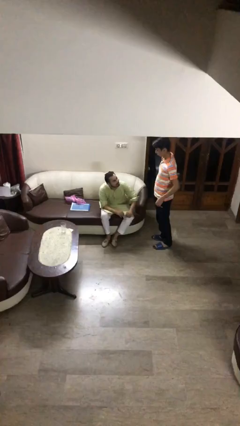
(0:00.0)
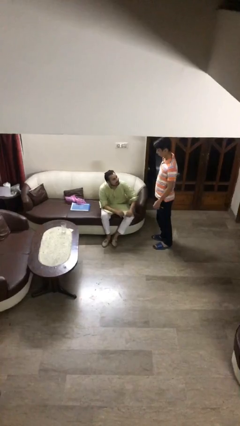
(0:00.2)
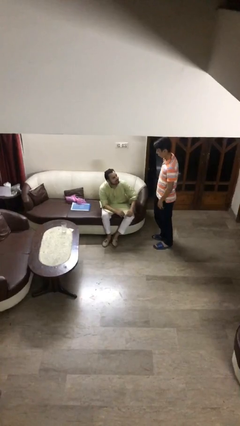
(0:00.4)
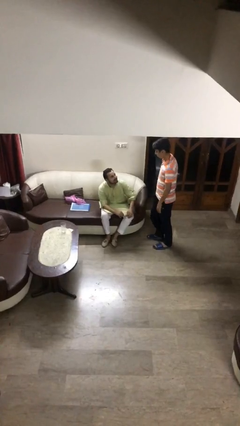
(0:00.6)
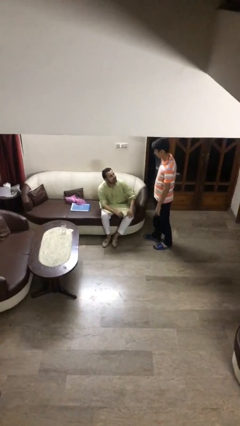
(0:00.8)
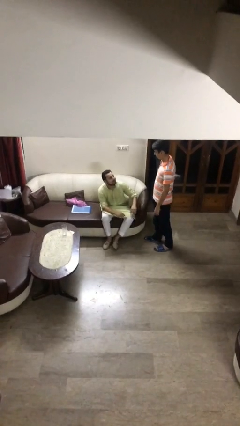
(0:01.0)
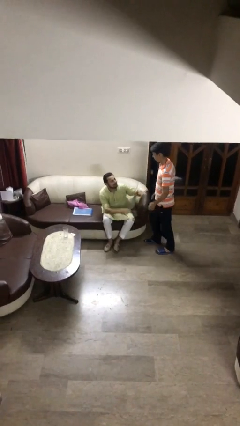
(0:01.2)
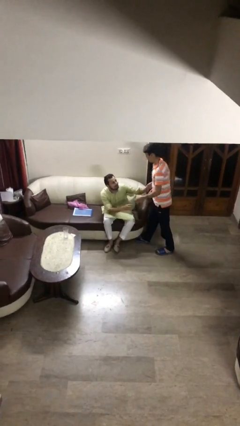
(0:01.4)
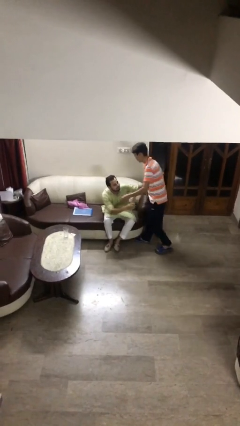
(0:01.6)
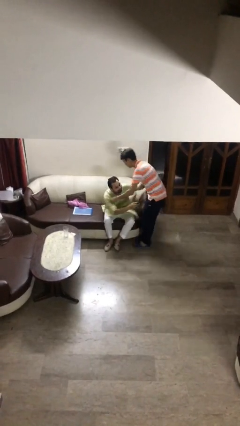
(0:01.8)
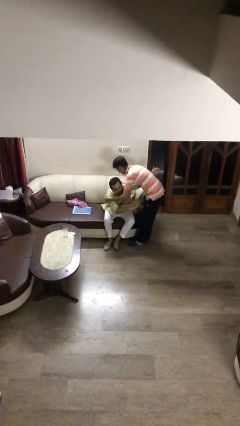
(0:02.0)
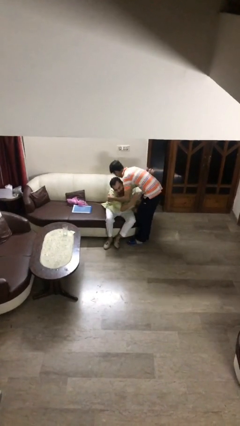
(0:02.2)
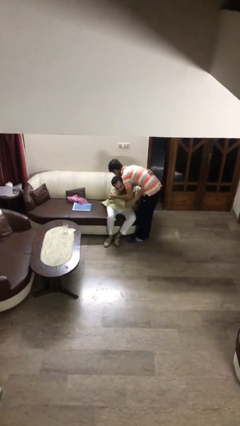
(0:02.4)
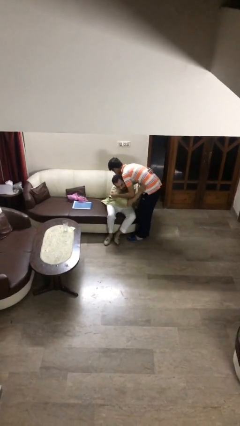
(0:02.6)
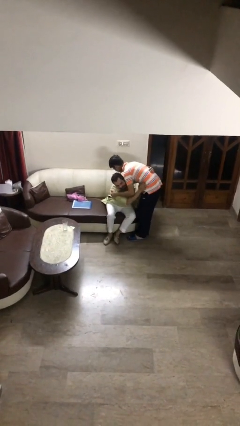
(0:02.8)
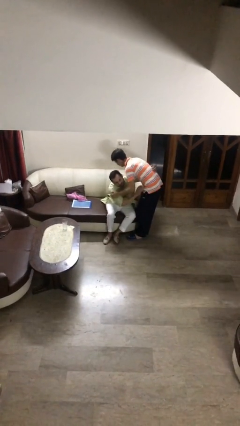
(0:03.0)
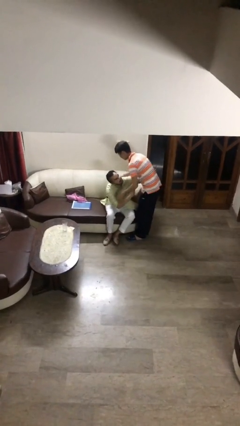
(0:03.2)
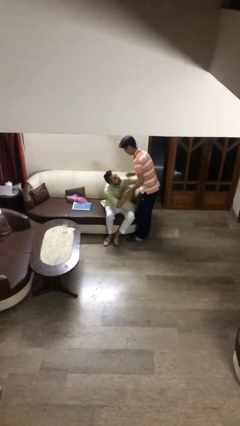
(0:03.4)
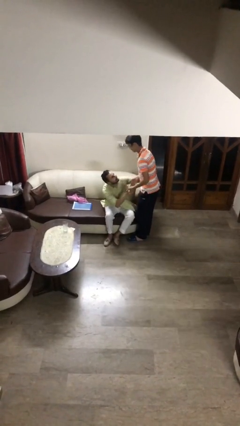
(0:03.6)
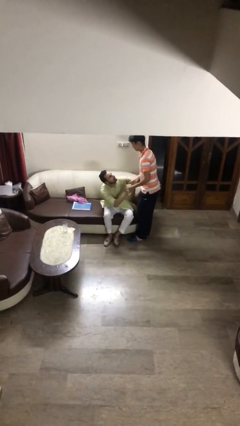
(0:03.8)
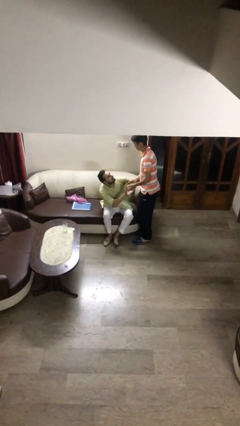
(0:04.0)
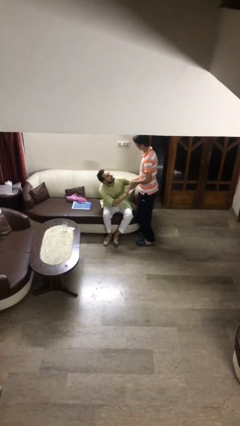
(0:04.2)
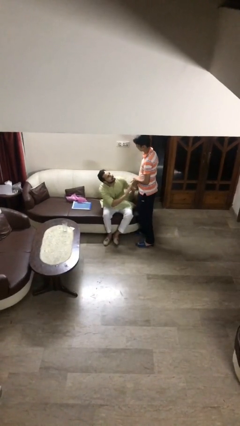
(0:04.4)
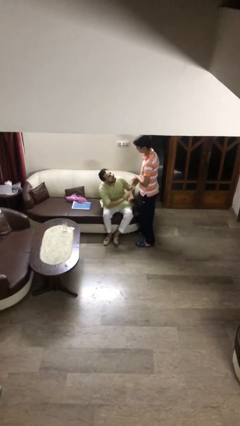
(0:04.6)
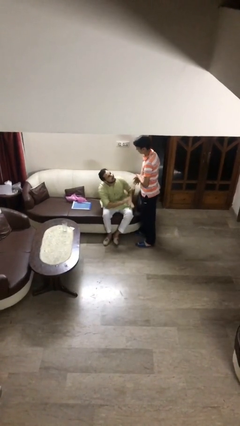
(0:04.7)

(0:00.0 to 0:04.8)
person embraces person

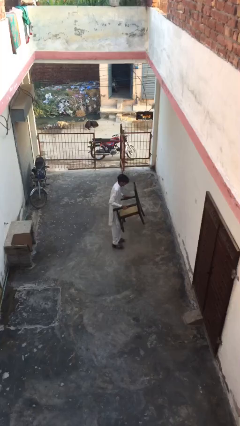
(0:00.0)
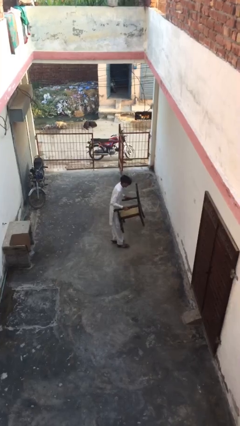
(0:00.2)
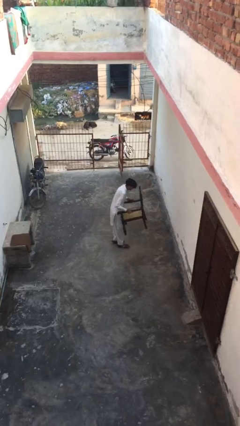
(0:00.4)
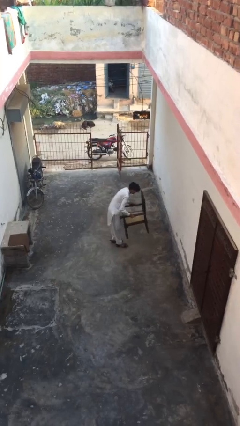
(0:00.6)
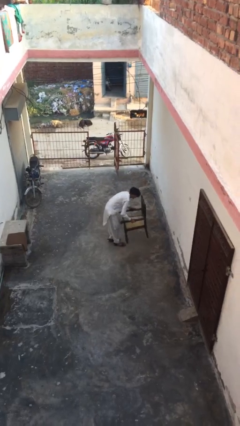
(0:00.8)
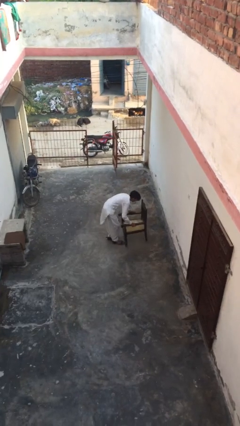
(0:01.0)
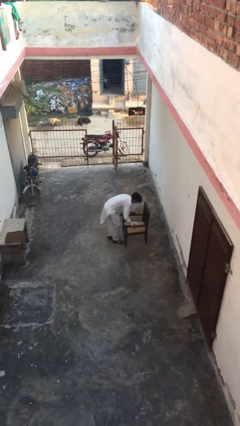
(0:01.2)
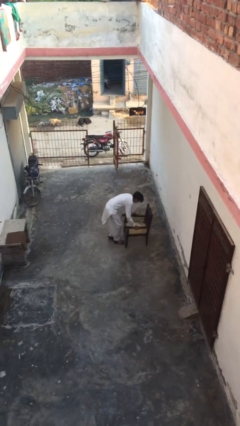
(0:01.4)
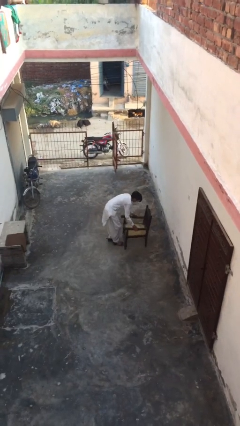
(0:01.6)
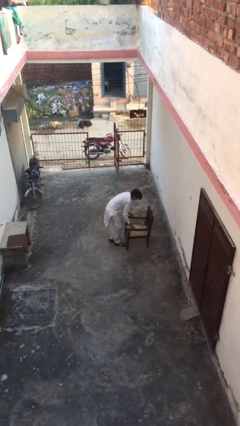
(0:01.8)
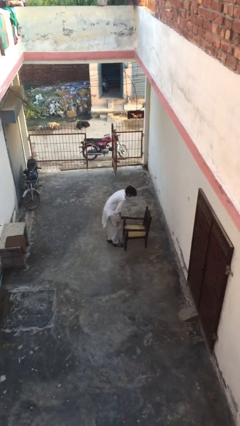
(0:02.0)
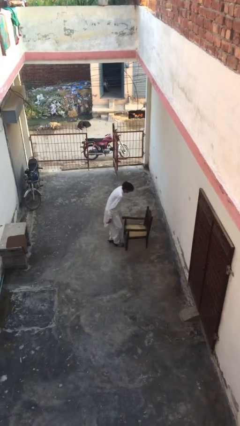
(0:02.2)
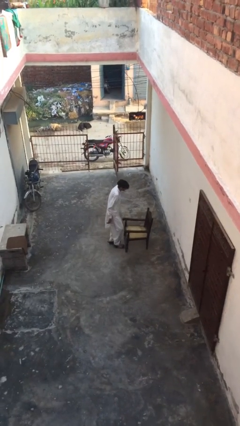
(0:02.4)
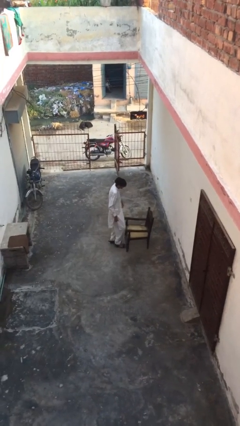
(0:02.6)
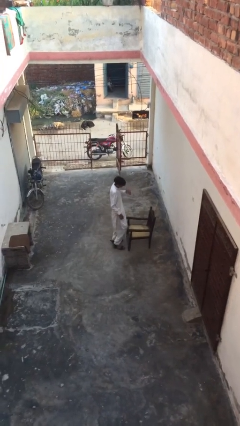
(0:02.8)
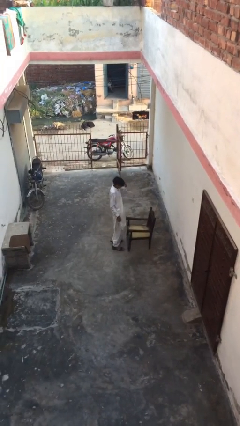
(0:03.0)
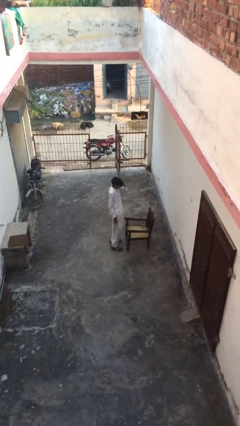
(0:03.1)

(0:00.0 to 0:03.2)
person puts down object on floor

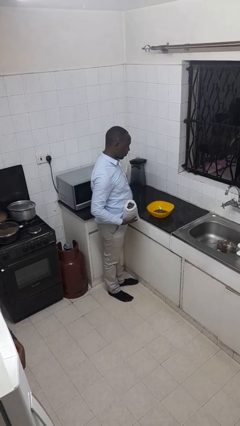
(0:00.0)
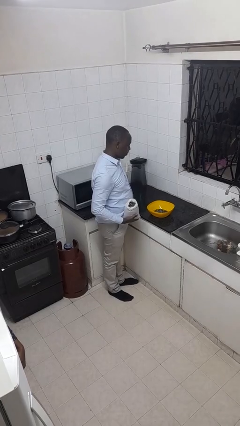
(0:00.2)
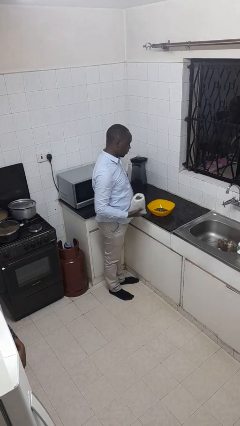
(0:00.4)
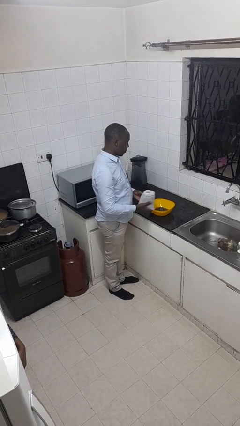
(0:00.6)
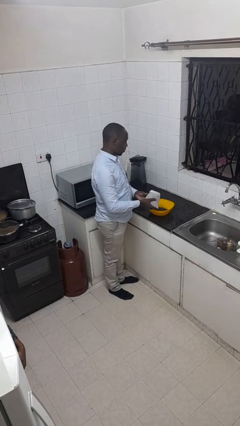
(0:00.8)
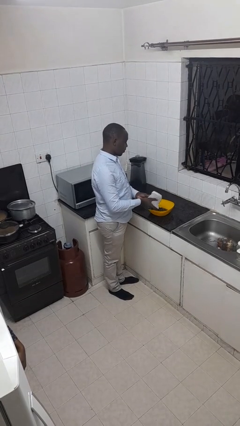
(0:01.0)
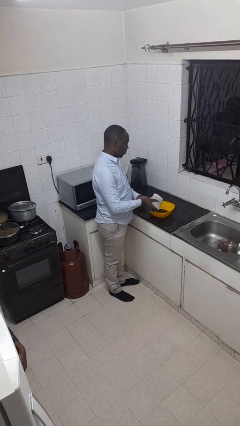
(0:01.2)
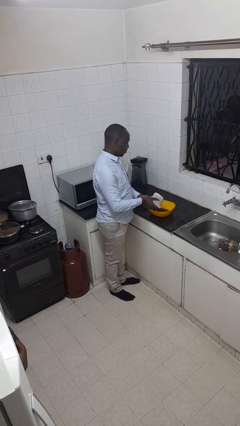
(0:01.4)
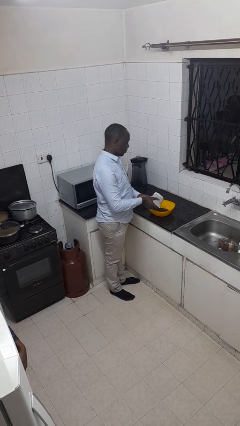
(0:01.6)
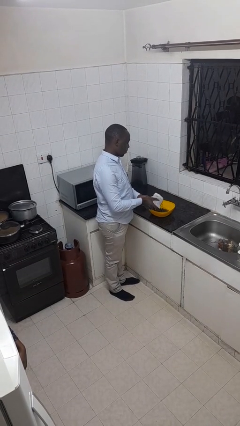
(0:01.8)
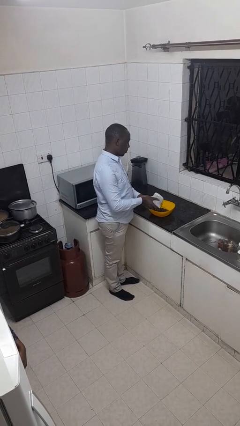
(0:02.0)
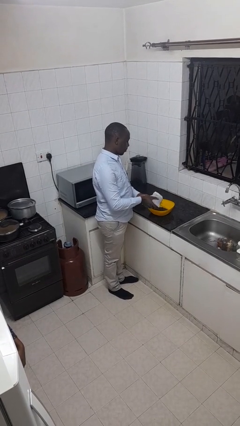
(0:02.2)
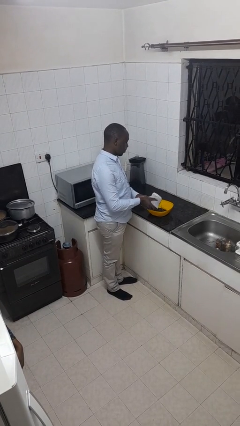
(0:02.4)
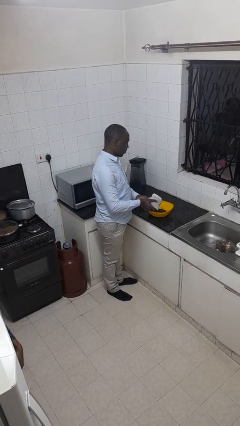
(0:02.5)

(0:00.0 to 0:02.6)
person pours into bowl

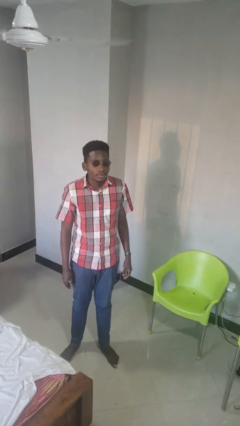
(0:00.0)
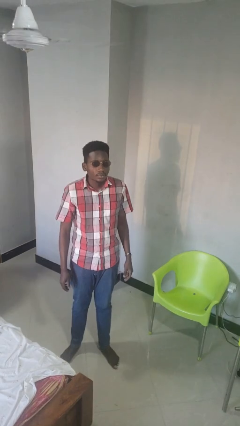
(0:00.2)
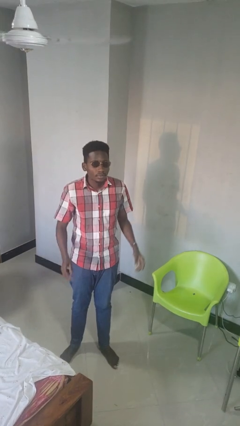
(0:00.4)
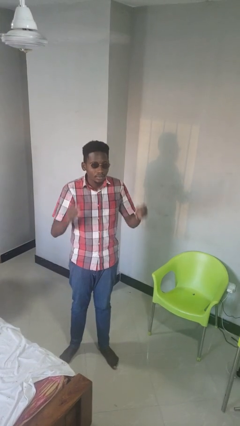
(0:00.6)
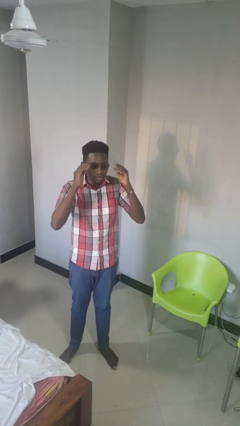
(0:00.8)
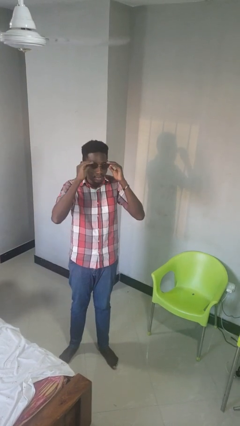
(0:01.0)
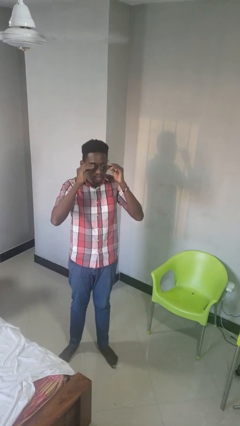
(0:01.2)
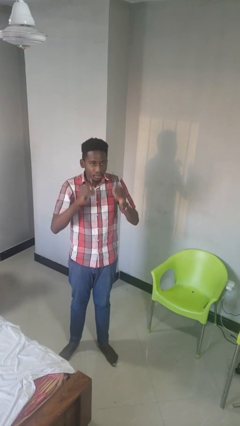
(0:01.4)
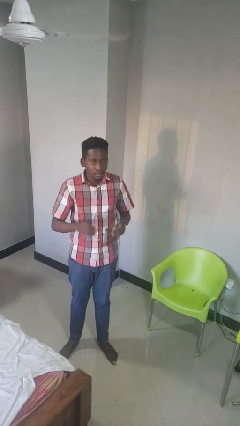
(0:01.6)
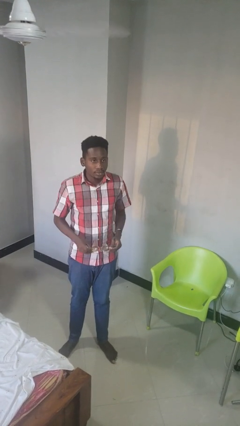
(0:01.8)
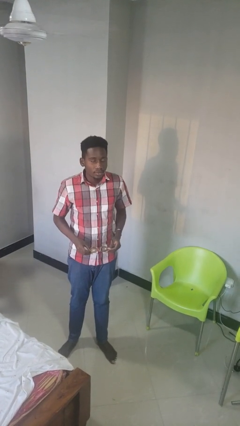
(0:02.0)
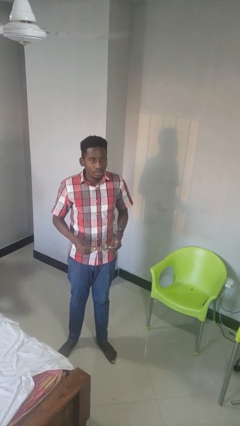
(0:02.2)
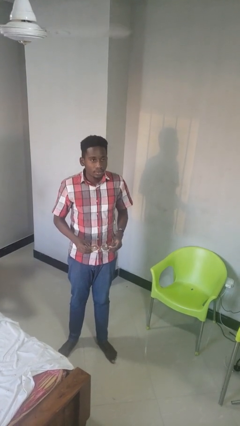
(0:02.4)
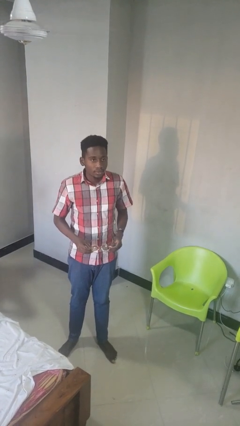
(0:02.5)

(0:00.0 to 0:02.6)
person takes off sunglasses

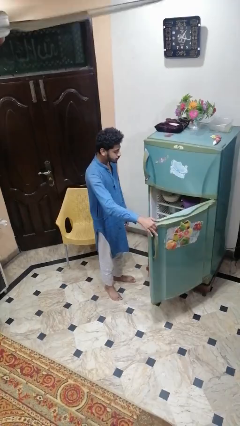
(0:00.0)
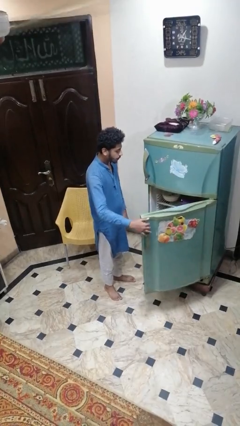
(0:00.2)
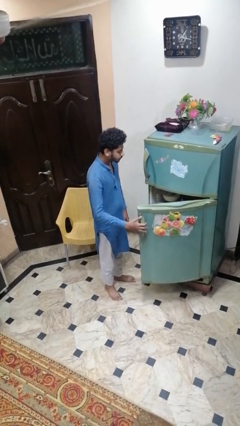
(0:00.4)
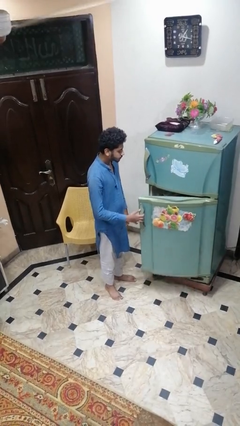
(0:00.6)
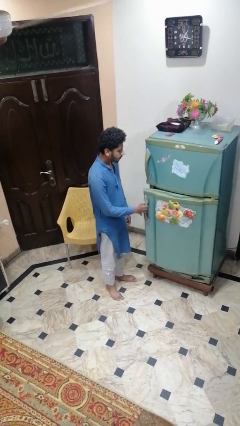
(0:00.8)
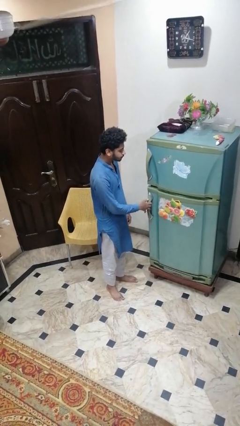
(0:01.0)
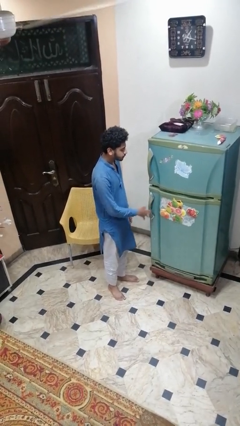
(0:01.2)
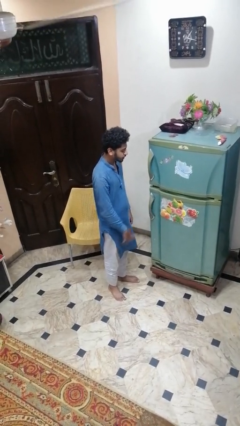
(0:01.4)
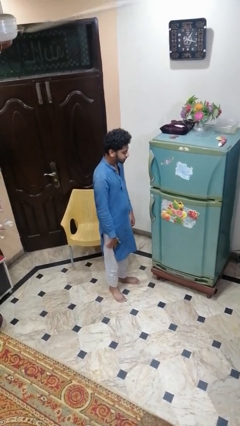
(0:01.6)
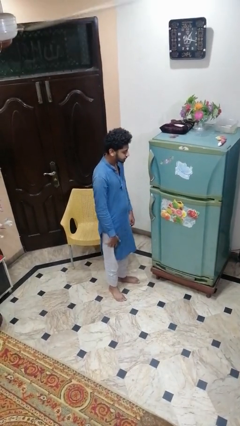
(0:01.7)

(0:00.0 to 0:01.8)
person closes refrigerator

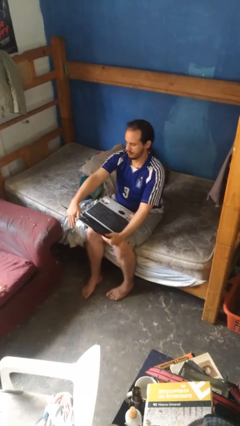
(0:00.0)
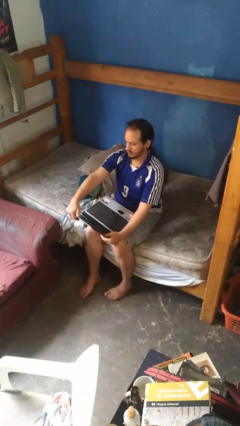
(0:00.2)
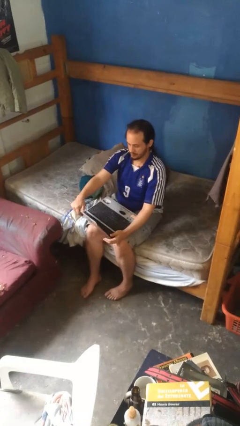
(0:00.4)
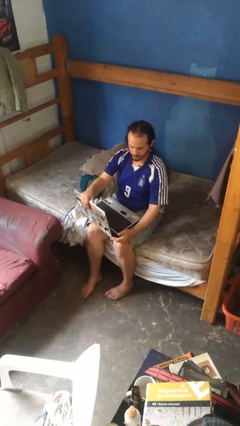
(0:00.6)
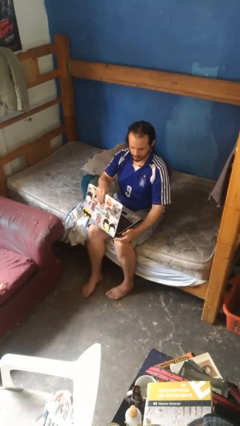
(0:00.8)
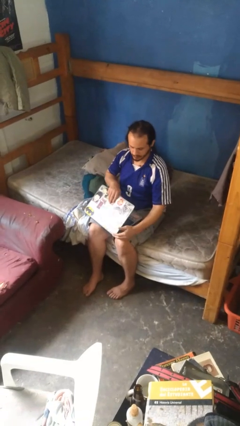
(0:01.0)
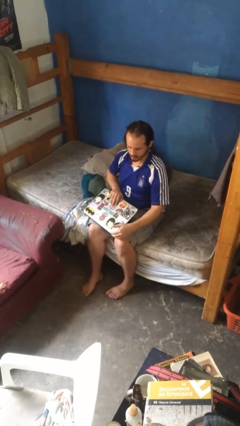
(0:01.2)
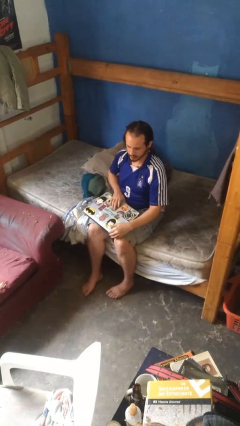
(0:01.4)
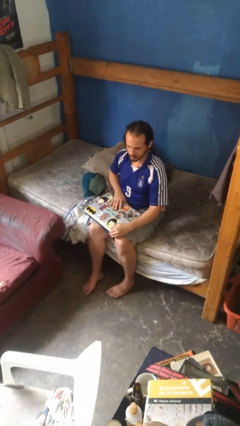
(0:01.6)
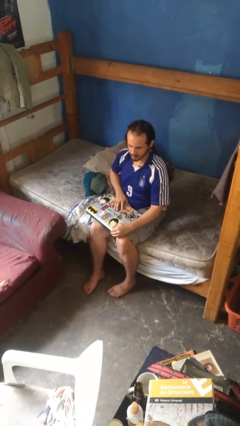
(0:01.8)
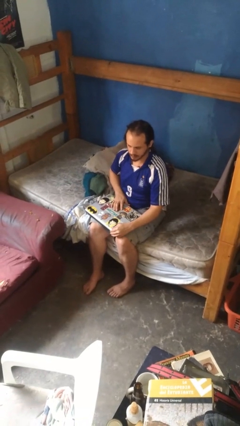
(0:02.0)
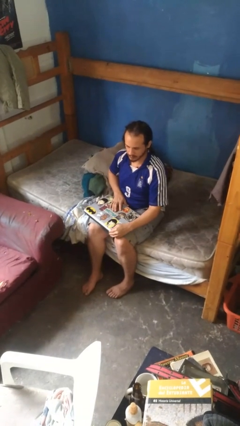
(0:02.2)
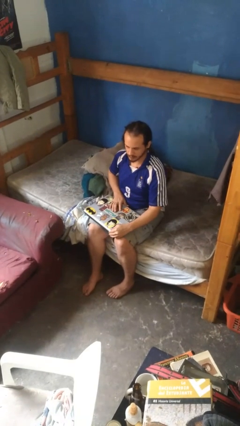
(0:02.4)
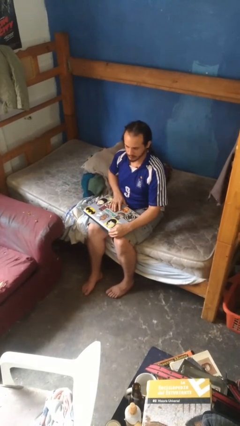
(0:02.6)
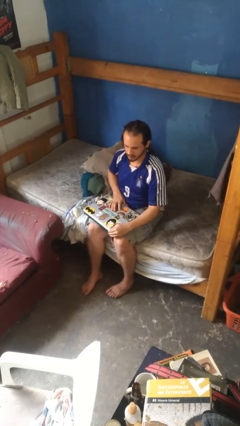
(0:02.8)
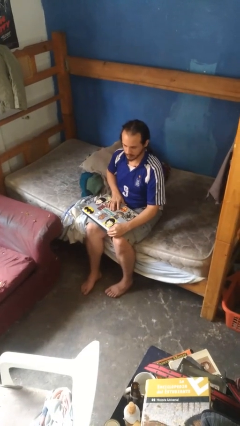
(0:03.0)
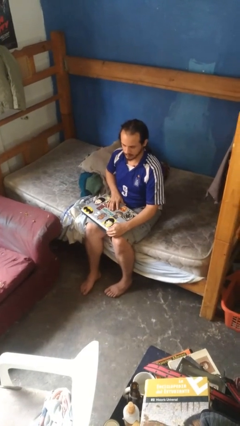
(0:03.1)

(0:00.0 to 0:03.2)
person closes laptop
